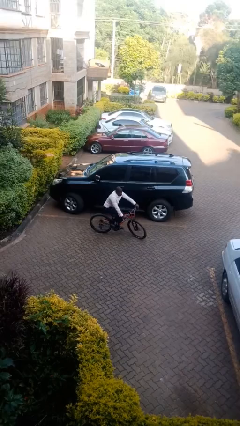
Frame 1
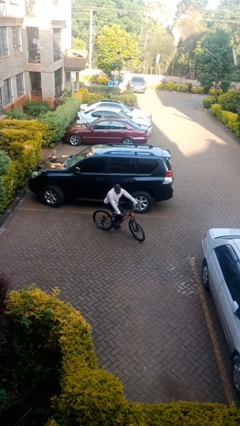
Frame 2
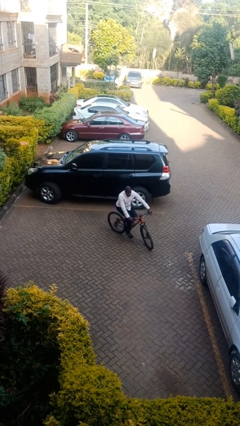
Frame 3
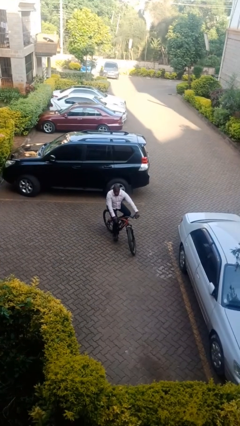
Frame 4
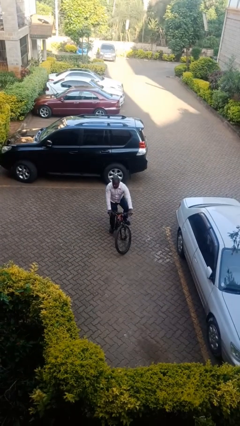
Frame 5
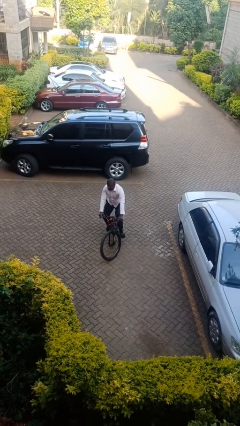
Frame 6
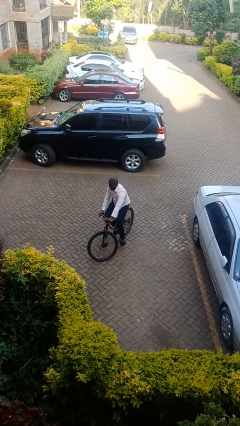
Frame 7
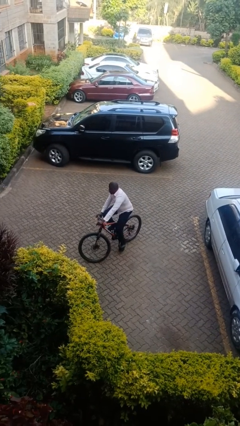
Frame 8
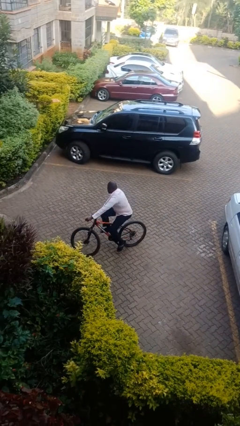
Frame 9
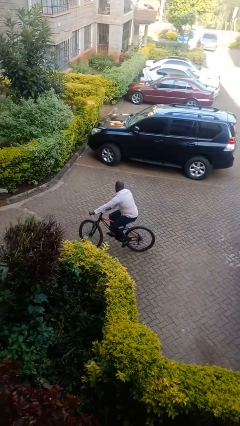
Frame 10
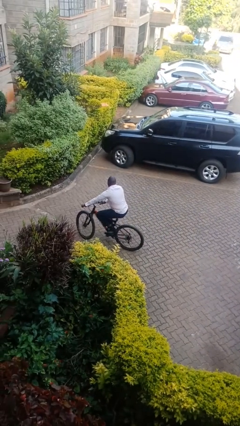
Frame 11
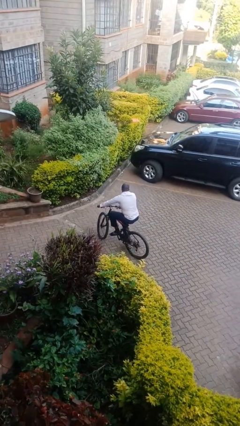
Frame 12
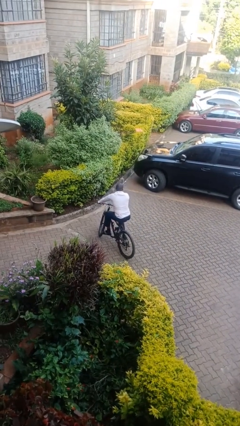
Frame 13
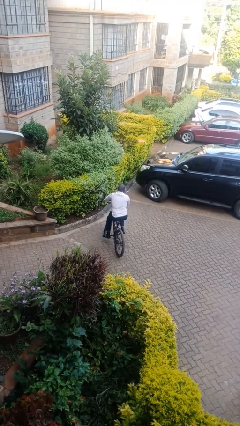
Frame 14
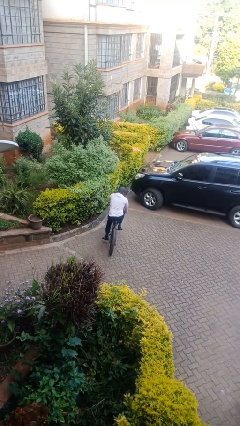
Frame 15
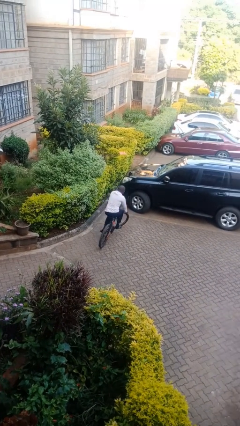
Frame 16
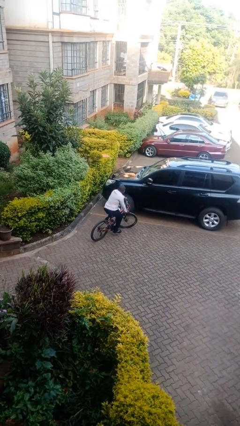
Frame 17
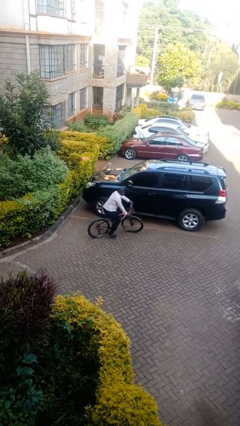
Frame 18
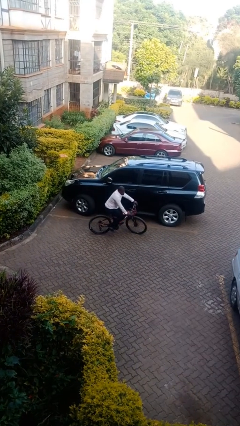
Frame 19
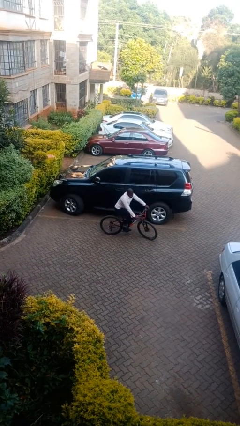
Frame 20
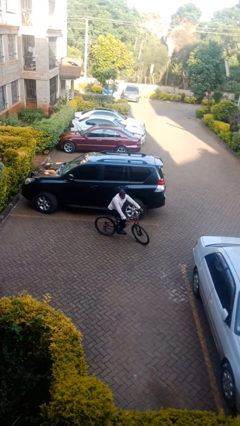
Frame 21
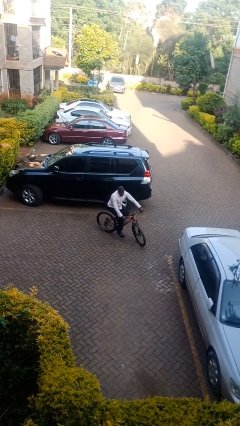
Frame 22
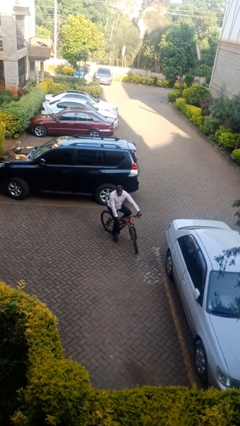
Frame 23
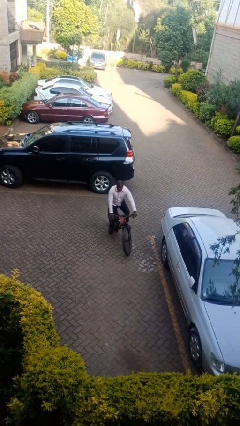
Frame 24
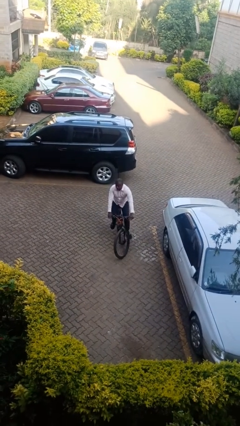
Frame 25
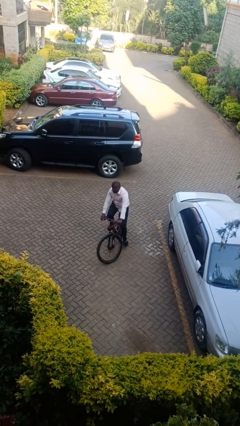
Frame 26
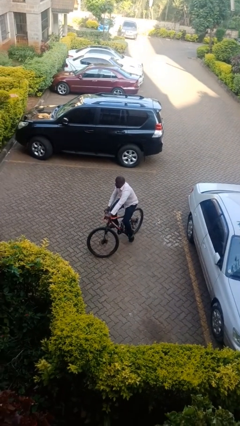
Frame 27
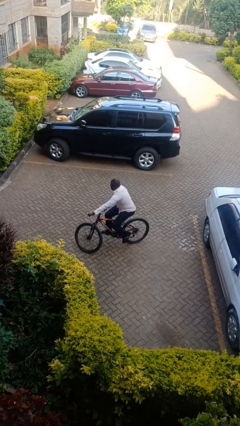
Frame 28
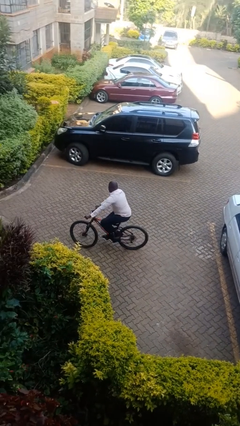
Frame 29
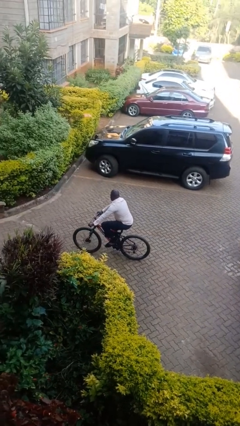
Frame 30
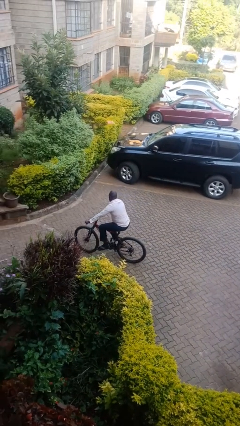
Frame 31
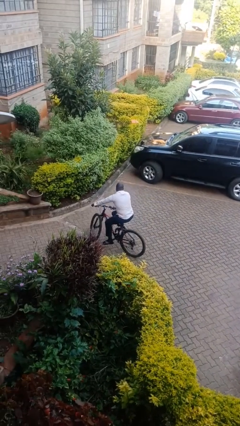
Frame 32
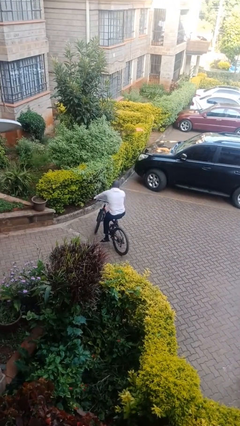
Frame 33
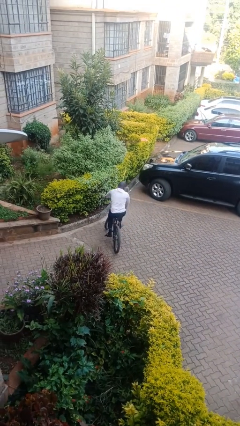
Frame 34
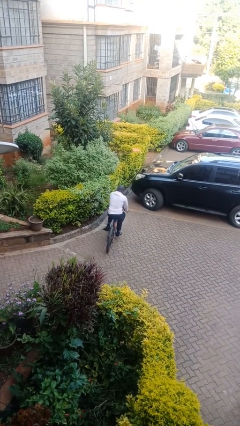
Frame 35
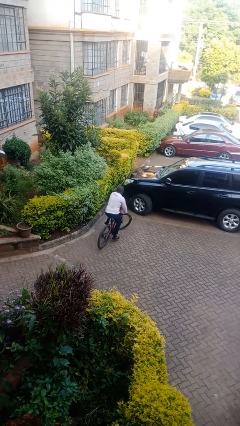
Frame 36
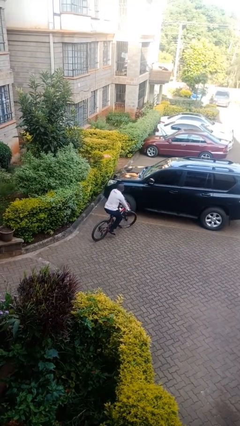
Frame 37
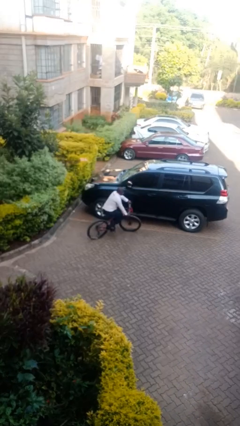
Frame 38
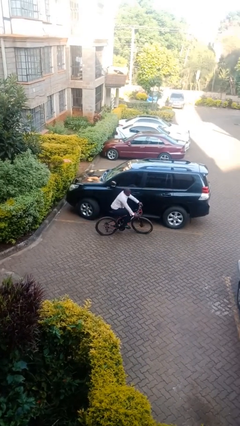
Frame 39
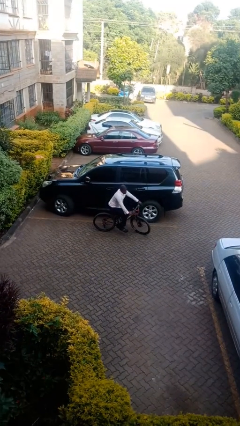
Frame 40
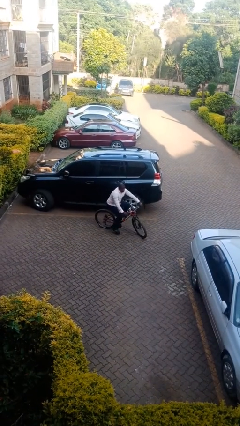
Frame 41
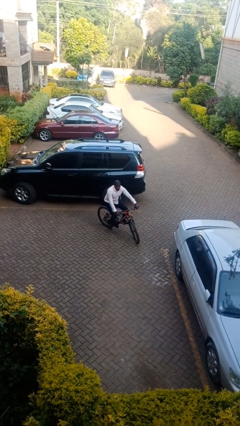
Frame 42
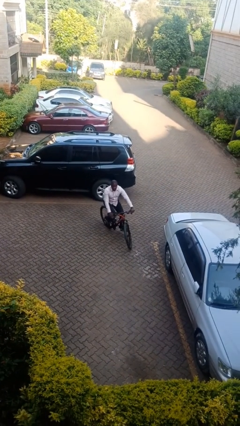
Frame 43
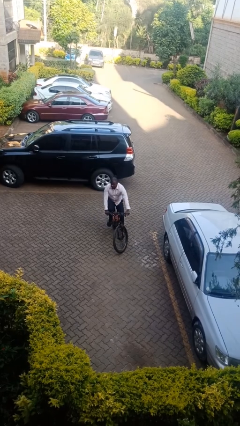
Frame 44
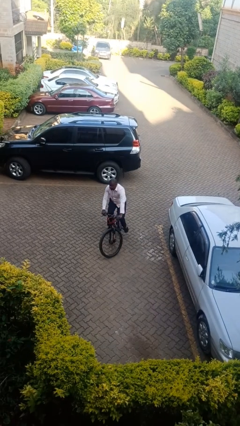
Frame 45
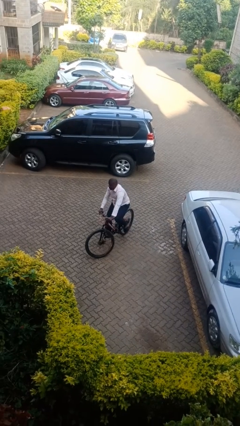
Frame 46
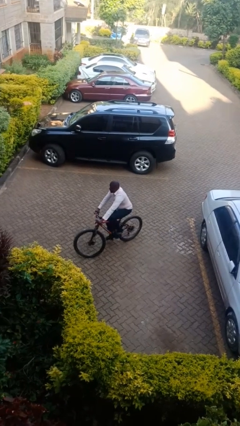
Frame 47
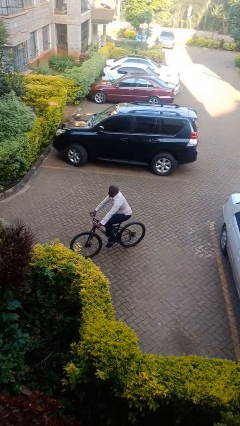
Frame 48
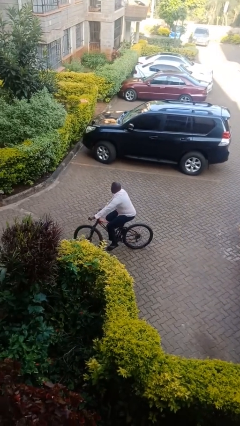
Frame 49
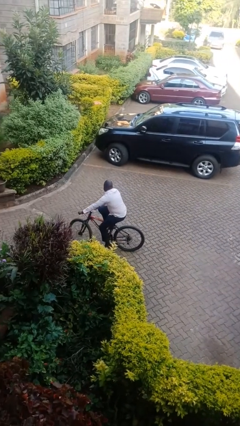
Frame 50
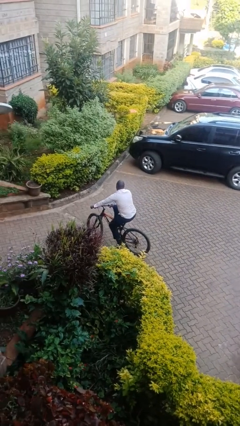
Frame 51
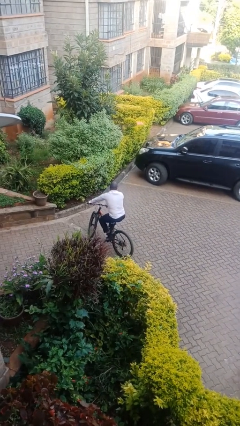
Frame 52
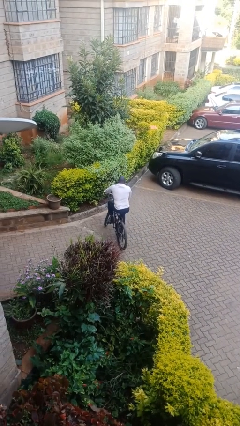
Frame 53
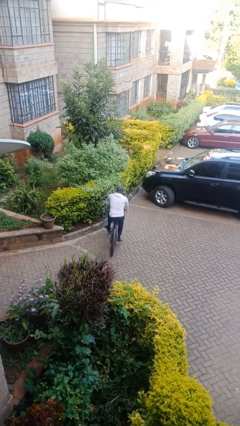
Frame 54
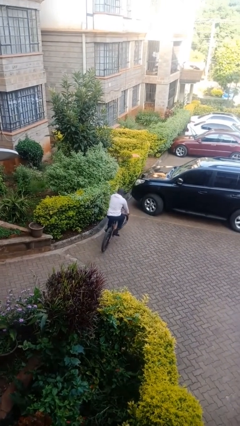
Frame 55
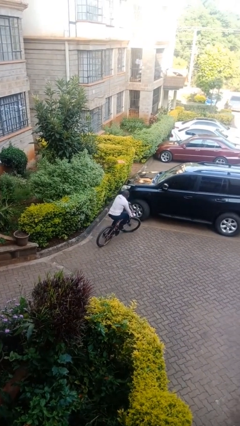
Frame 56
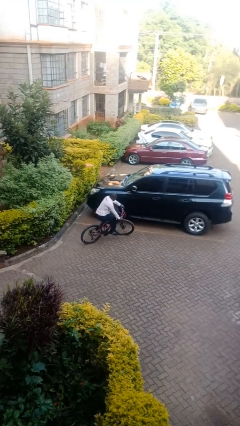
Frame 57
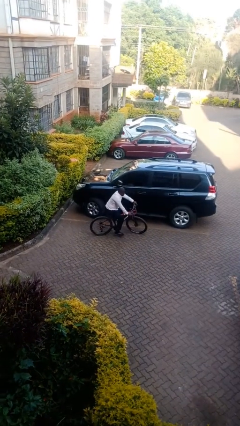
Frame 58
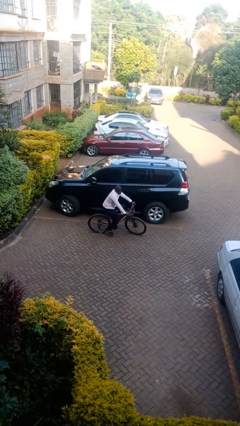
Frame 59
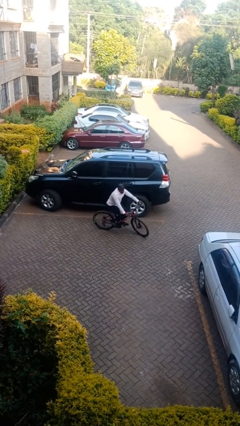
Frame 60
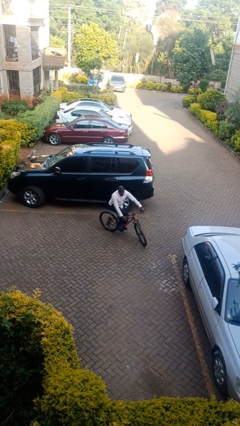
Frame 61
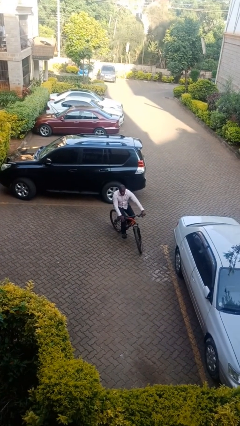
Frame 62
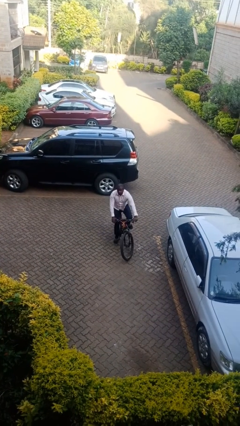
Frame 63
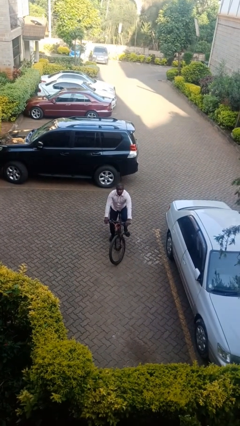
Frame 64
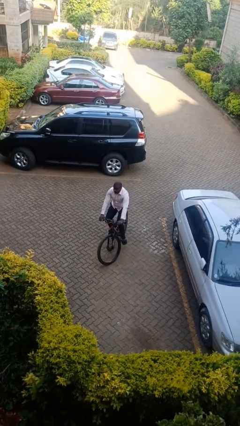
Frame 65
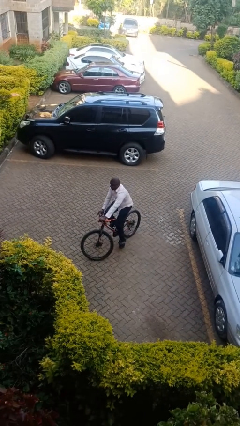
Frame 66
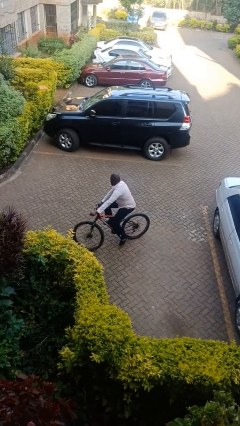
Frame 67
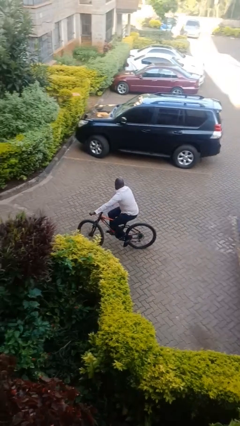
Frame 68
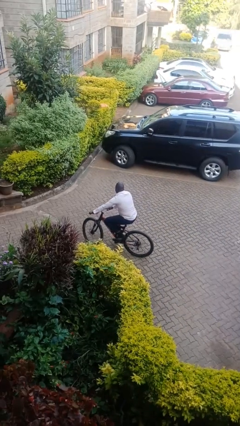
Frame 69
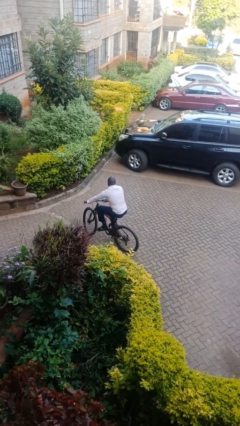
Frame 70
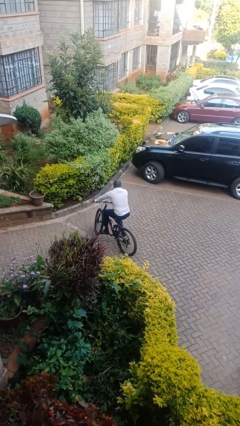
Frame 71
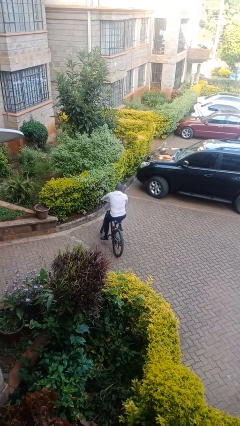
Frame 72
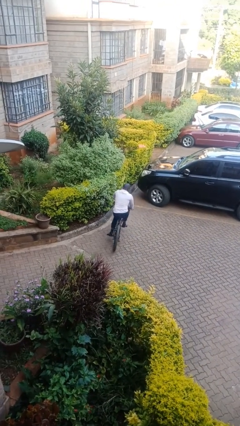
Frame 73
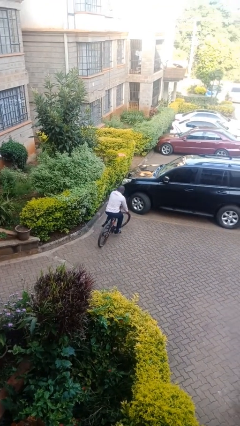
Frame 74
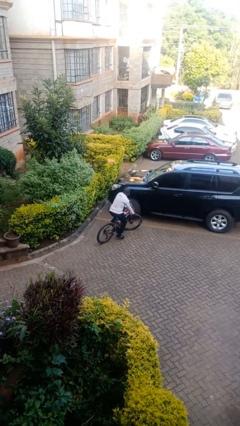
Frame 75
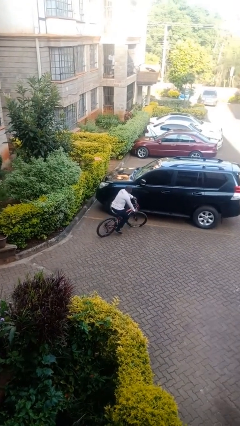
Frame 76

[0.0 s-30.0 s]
person rides bicycle

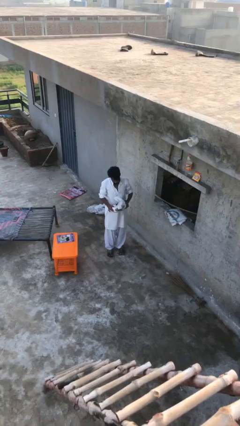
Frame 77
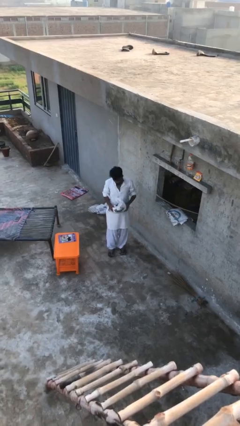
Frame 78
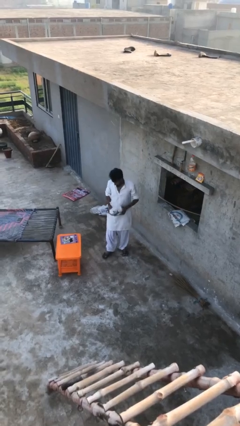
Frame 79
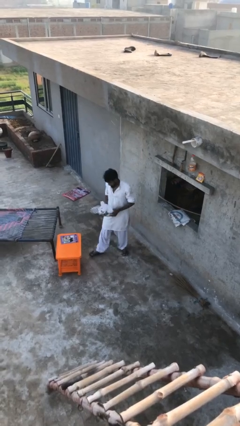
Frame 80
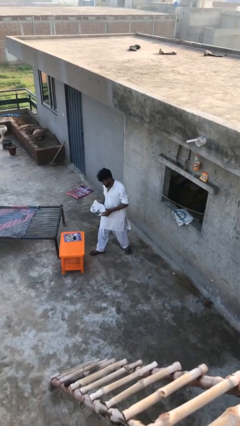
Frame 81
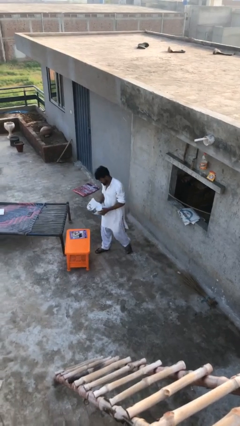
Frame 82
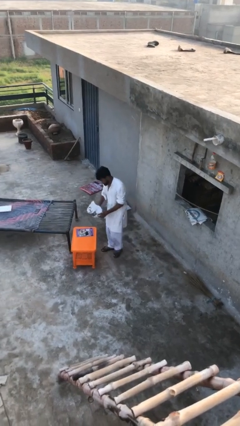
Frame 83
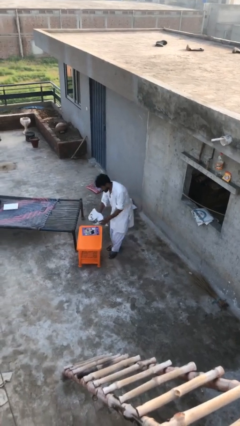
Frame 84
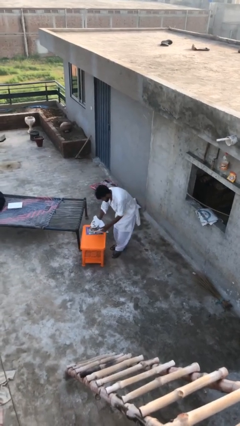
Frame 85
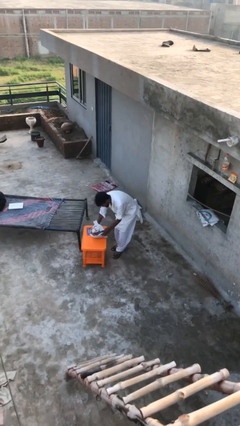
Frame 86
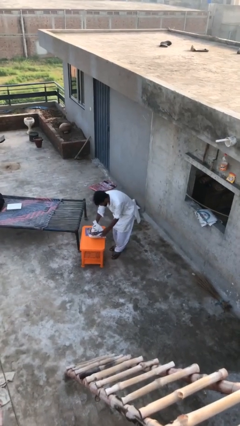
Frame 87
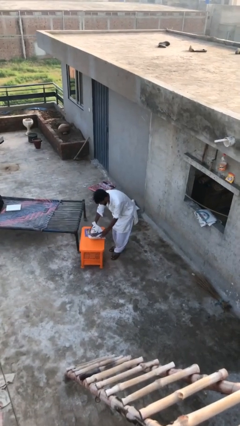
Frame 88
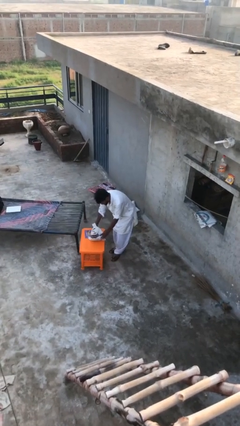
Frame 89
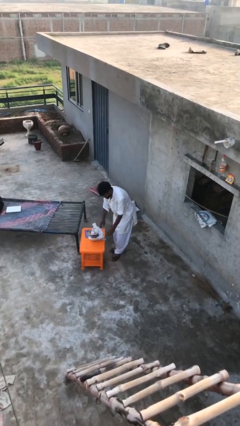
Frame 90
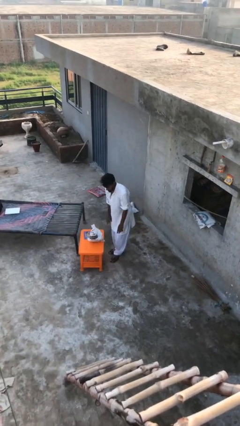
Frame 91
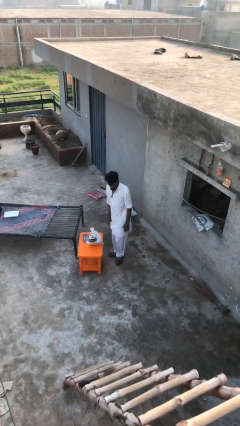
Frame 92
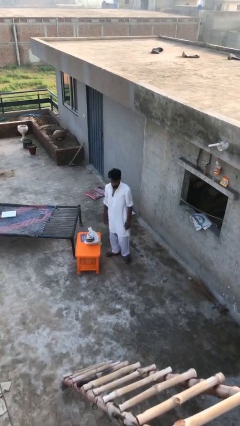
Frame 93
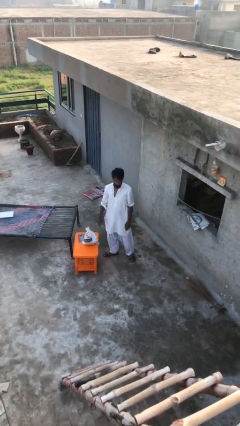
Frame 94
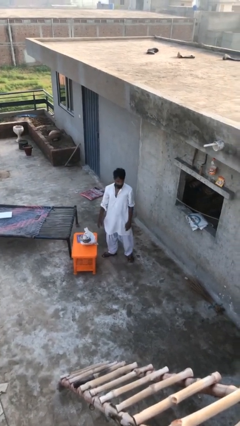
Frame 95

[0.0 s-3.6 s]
person puts down object on table

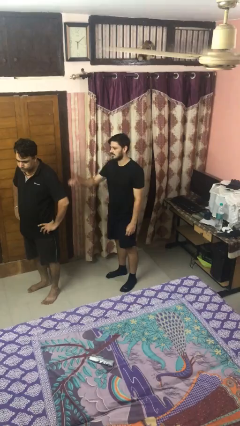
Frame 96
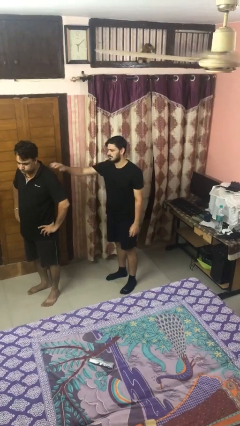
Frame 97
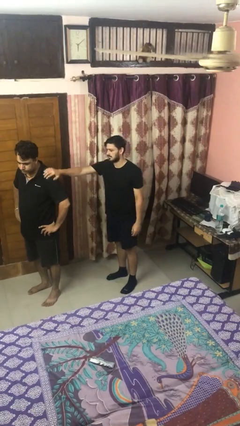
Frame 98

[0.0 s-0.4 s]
person grabs person by shoulder
